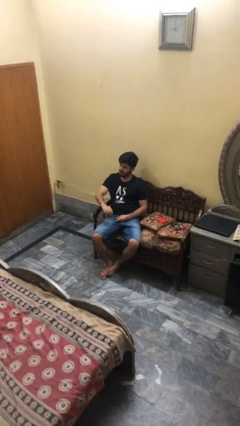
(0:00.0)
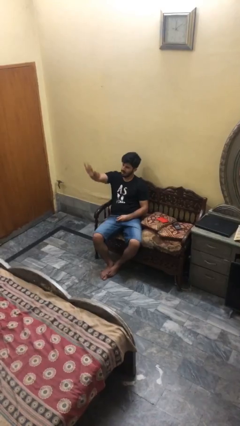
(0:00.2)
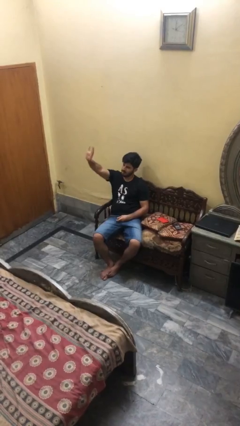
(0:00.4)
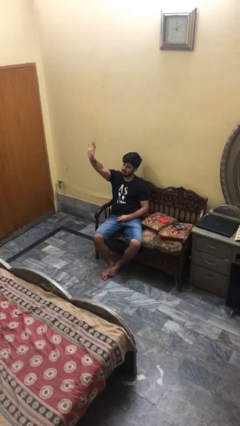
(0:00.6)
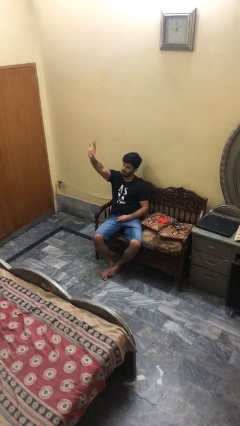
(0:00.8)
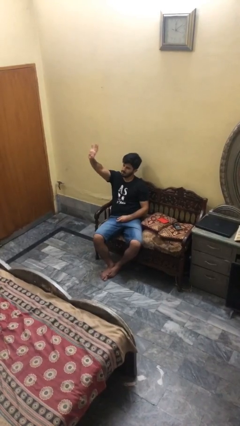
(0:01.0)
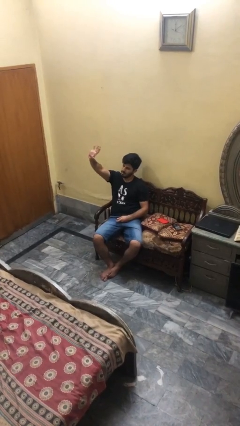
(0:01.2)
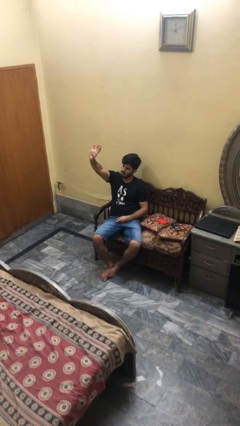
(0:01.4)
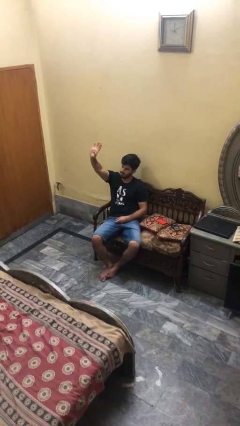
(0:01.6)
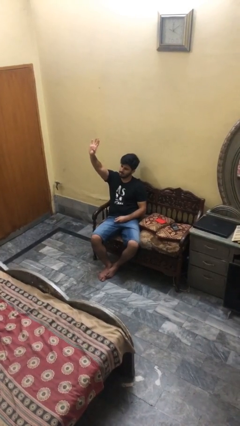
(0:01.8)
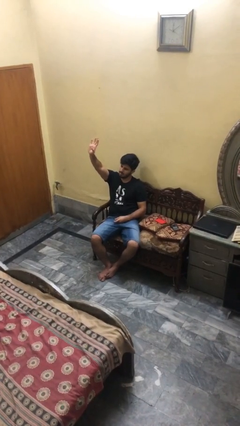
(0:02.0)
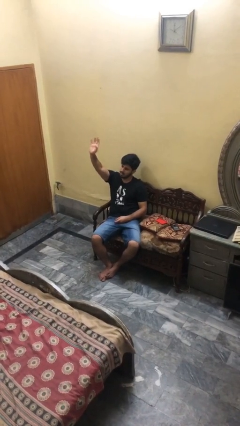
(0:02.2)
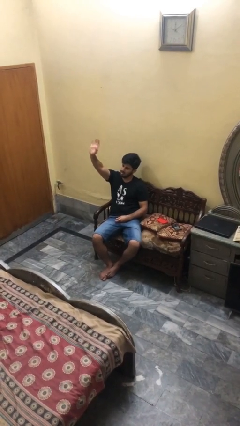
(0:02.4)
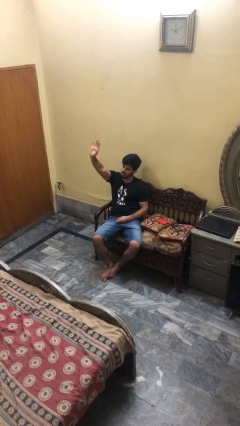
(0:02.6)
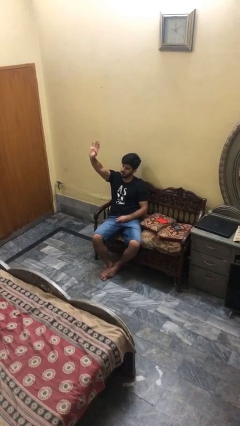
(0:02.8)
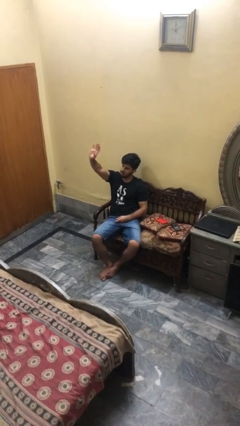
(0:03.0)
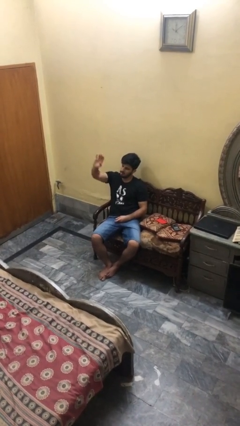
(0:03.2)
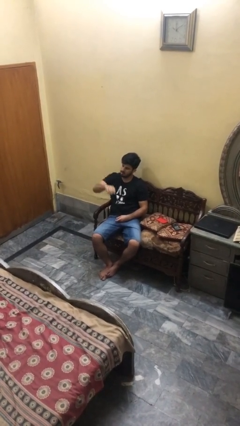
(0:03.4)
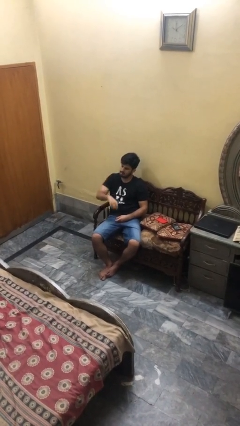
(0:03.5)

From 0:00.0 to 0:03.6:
person waves at person

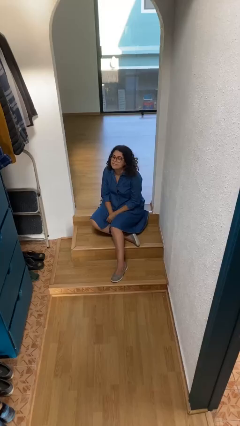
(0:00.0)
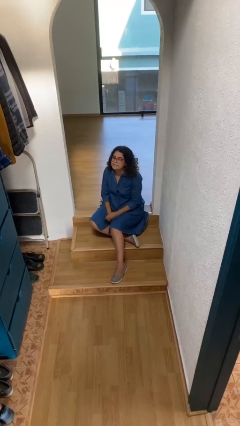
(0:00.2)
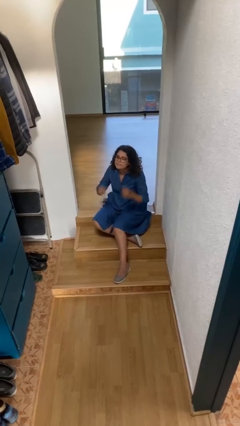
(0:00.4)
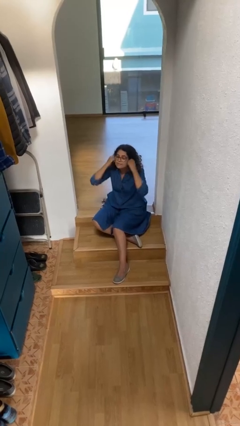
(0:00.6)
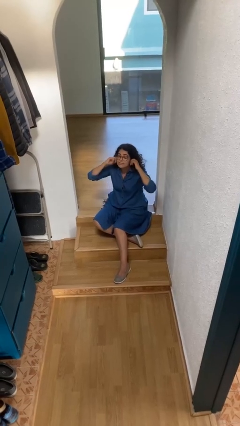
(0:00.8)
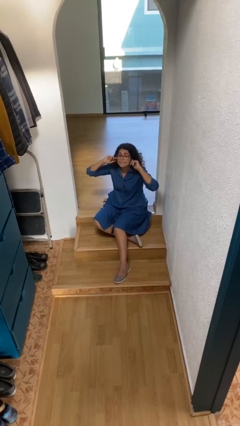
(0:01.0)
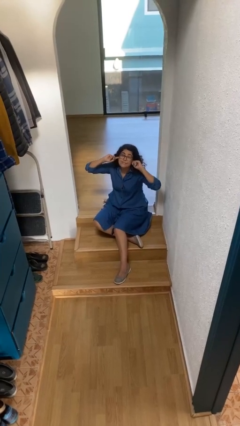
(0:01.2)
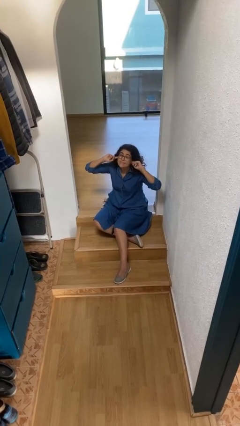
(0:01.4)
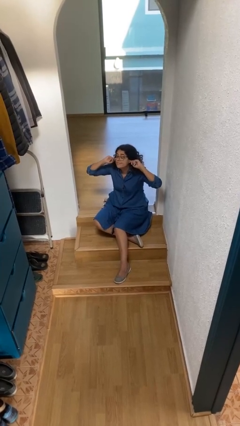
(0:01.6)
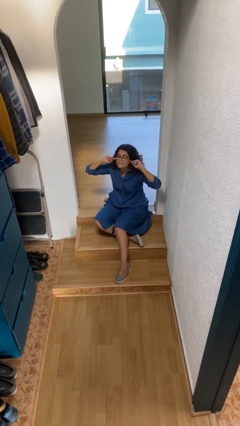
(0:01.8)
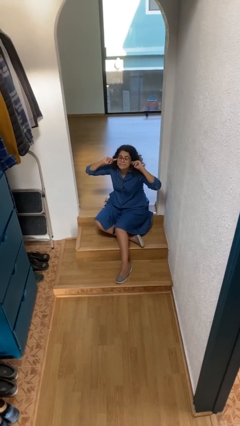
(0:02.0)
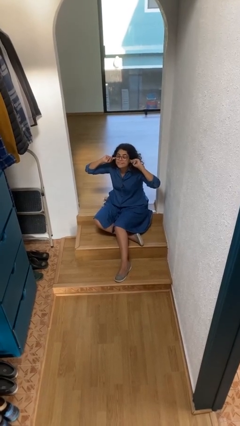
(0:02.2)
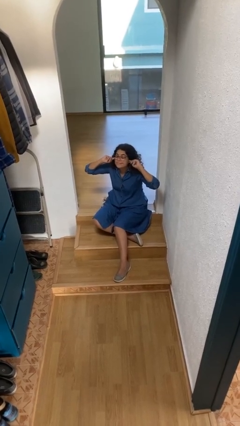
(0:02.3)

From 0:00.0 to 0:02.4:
person puts fingers in ear

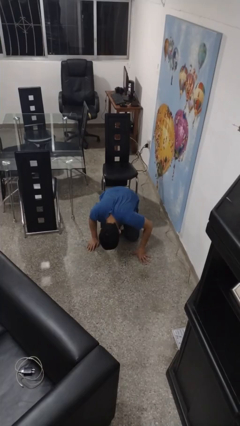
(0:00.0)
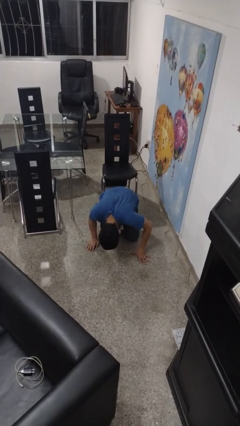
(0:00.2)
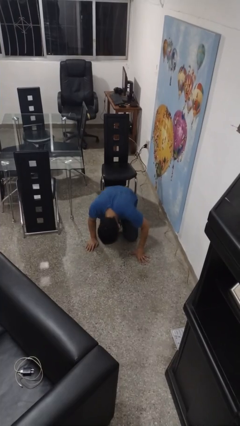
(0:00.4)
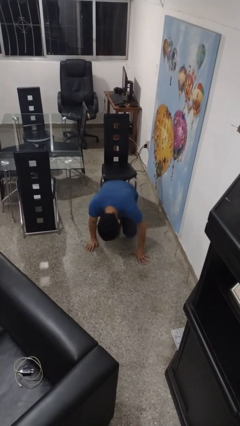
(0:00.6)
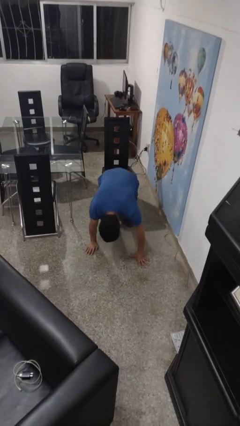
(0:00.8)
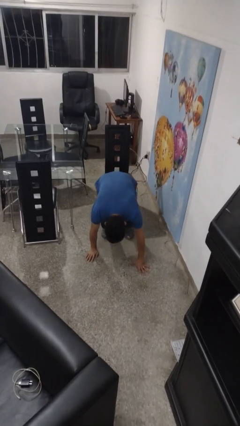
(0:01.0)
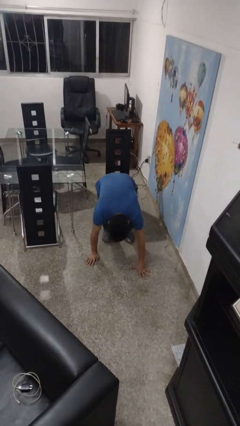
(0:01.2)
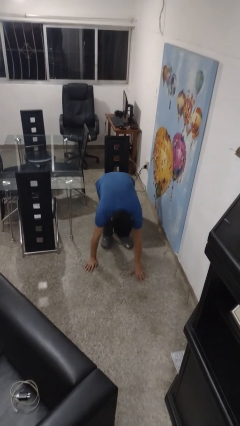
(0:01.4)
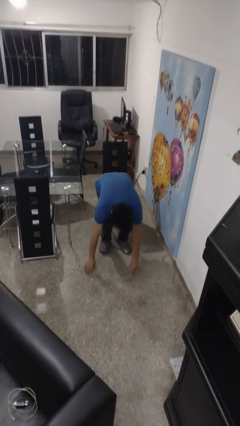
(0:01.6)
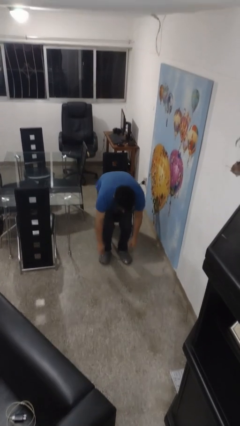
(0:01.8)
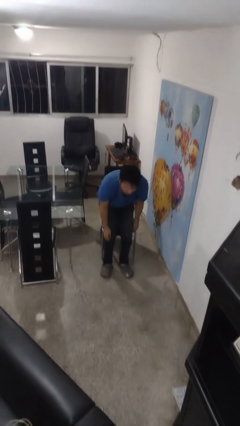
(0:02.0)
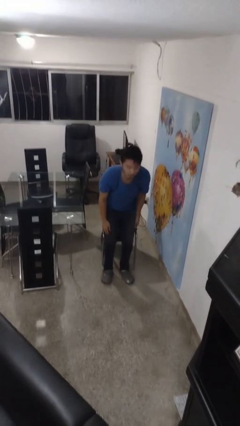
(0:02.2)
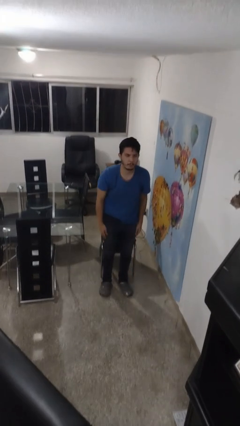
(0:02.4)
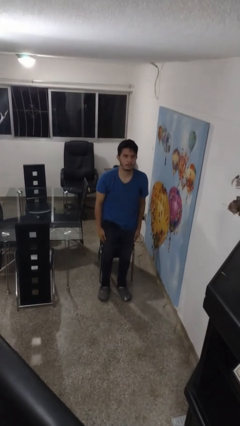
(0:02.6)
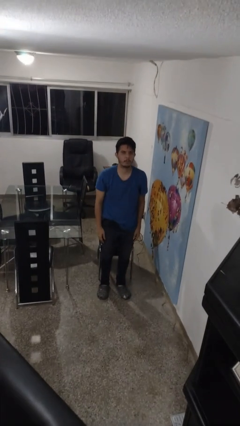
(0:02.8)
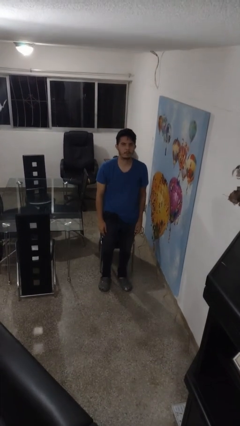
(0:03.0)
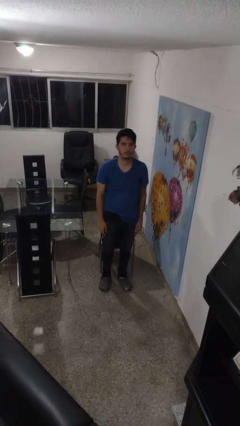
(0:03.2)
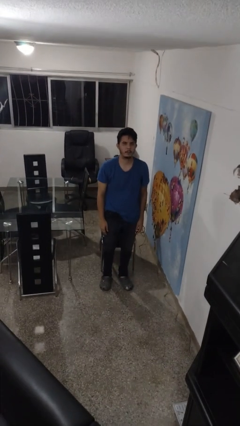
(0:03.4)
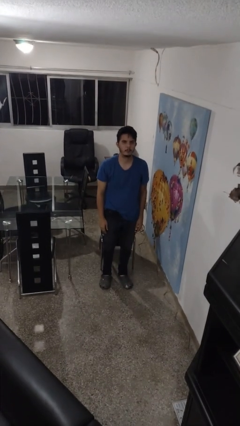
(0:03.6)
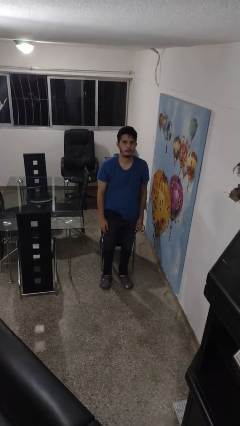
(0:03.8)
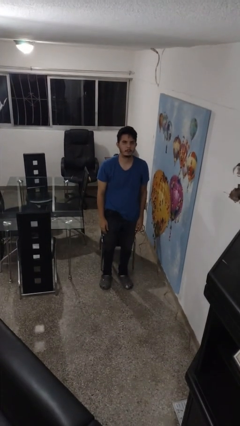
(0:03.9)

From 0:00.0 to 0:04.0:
person stands up from floor

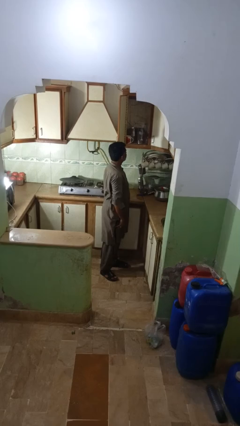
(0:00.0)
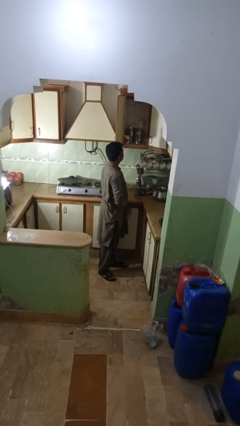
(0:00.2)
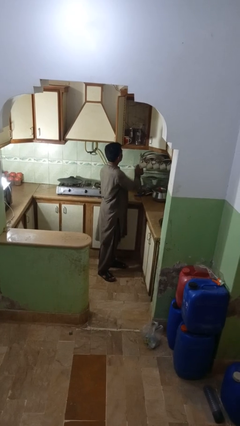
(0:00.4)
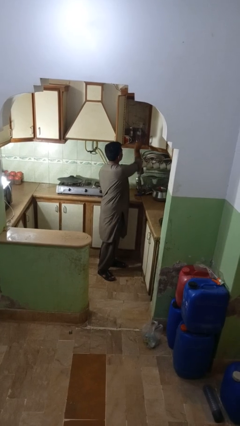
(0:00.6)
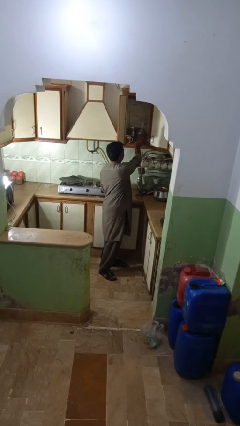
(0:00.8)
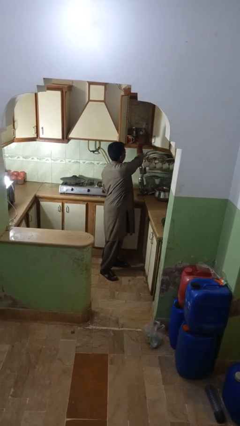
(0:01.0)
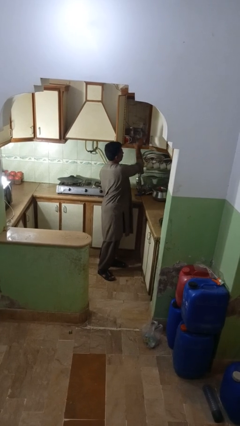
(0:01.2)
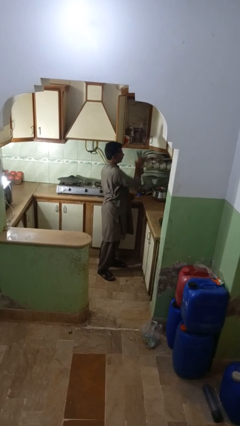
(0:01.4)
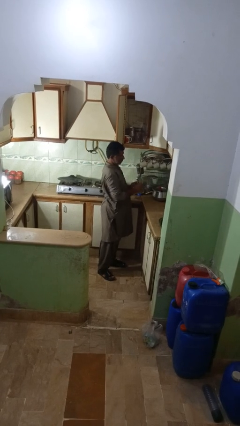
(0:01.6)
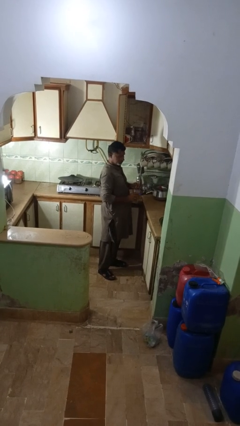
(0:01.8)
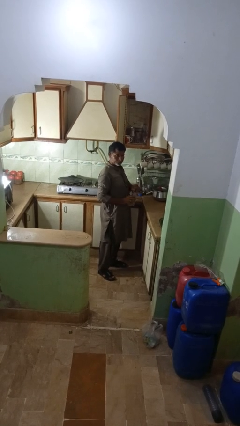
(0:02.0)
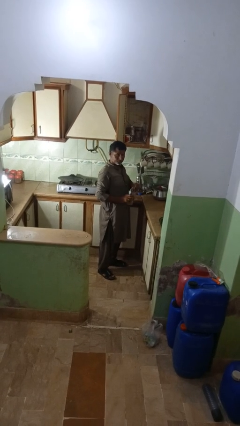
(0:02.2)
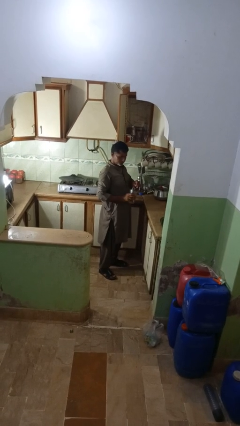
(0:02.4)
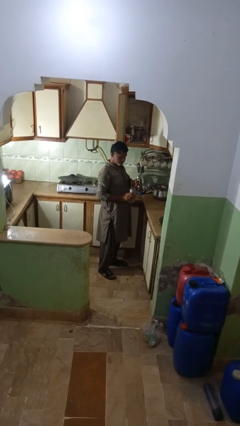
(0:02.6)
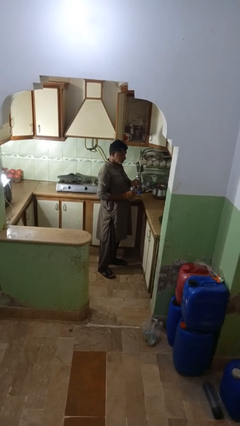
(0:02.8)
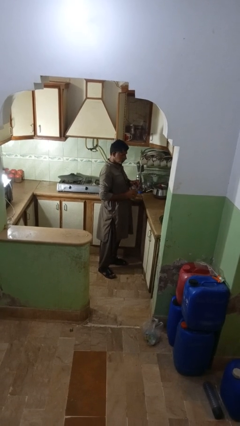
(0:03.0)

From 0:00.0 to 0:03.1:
person takes object from kitchen drawer

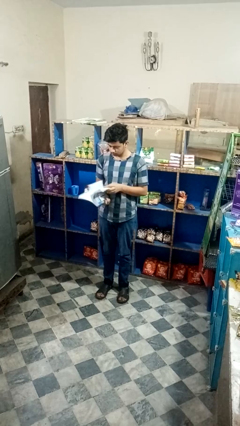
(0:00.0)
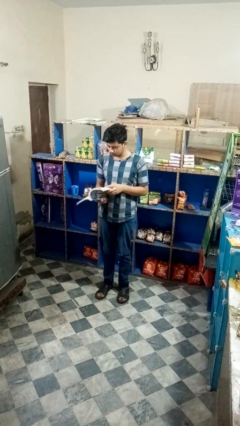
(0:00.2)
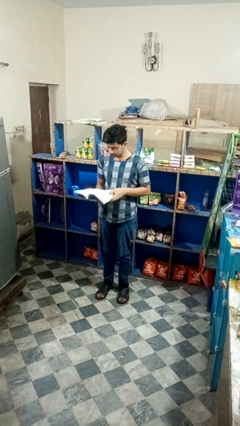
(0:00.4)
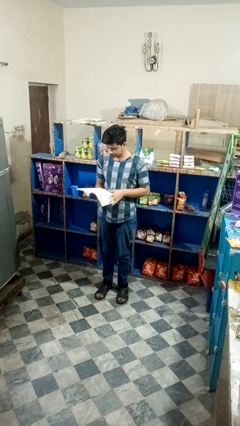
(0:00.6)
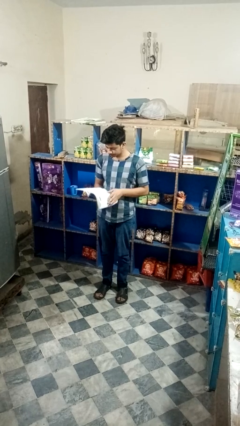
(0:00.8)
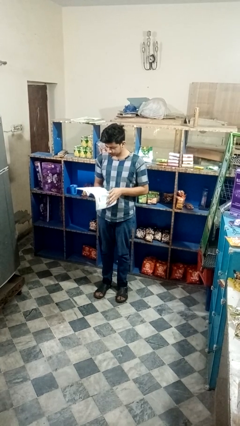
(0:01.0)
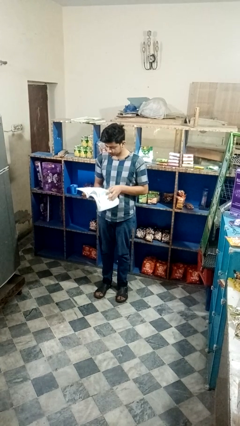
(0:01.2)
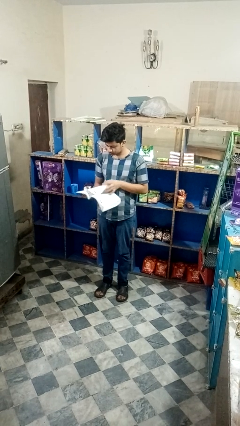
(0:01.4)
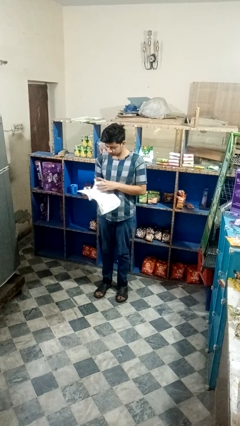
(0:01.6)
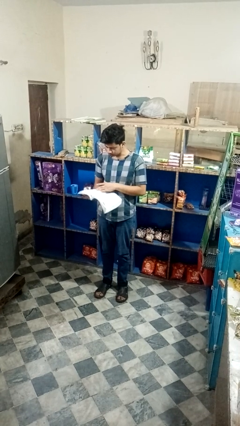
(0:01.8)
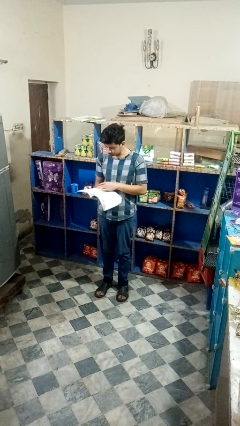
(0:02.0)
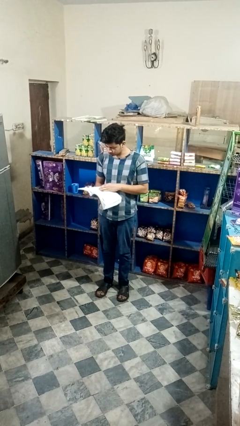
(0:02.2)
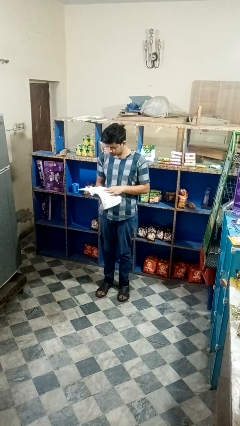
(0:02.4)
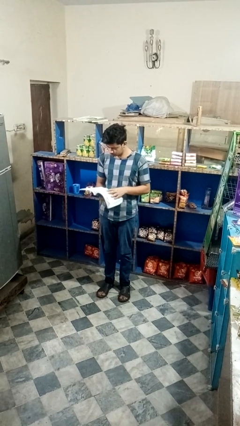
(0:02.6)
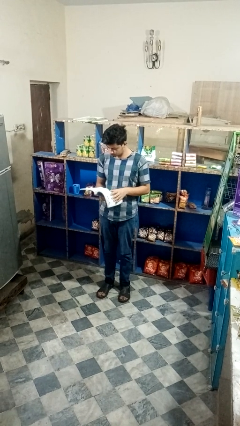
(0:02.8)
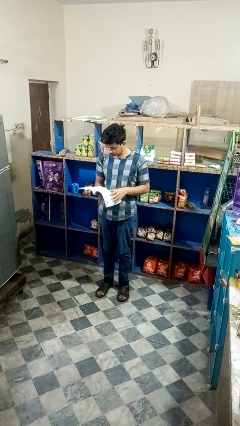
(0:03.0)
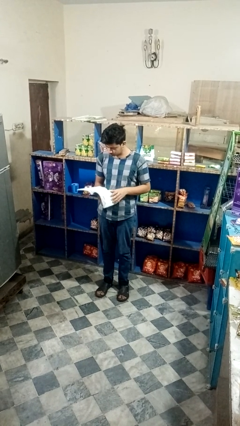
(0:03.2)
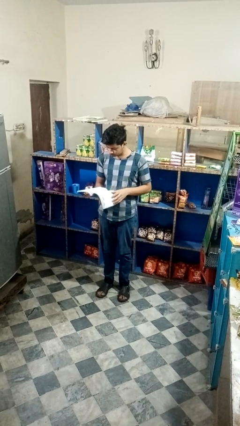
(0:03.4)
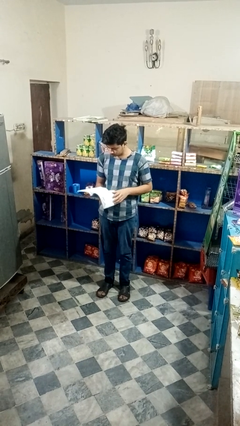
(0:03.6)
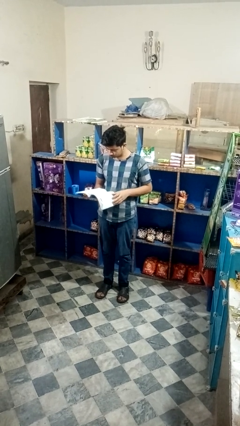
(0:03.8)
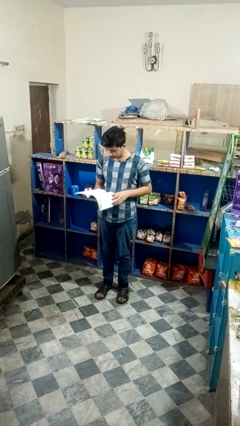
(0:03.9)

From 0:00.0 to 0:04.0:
person reads book

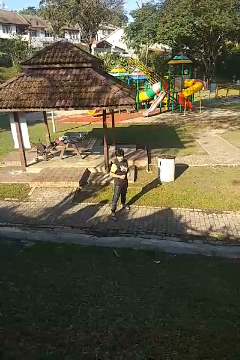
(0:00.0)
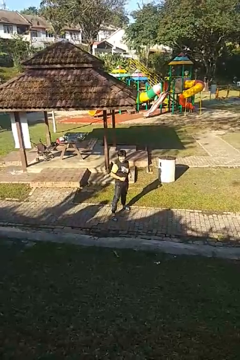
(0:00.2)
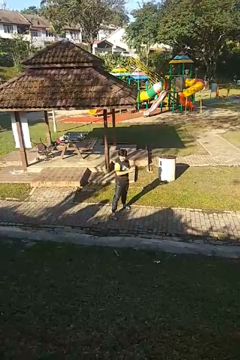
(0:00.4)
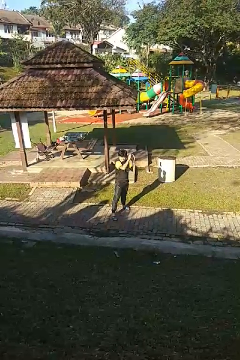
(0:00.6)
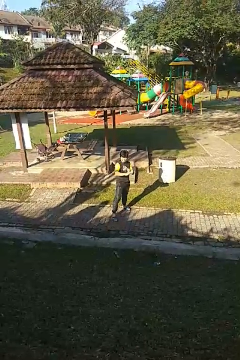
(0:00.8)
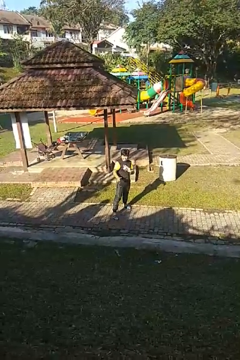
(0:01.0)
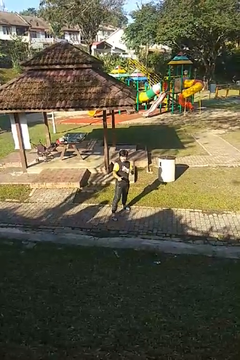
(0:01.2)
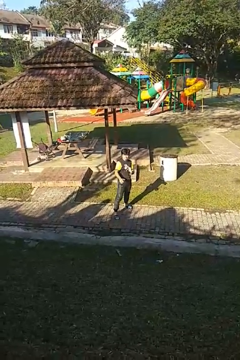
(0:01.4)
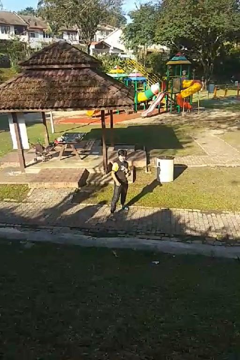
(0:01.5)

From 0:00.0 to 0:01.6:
person karate chop
